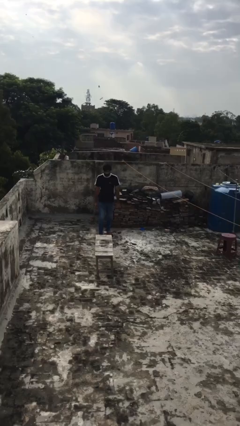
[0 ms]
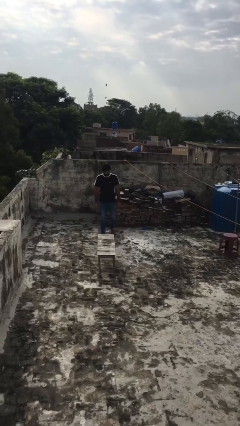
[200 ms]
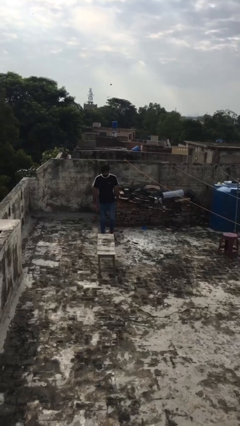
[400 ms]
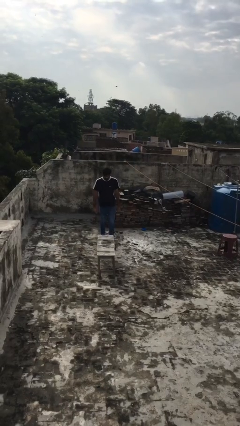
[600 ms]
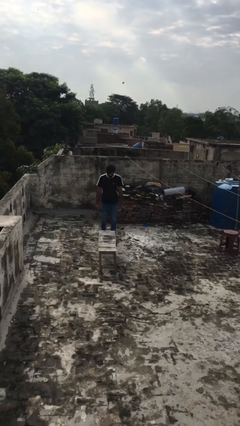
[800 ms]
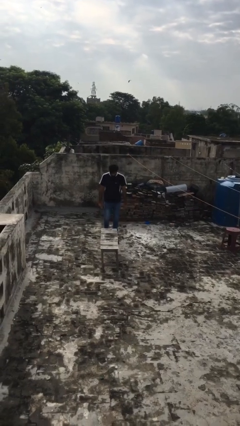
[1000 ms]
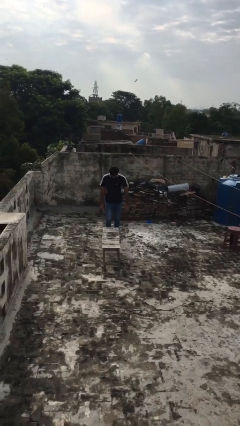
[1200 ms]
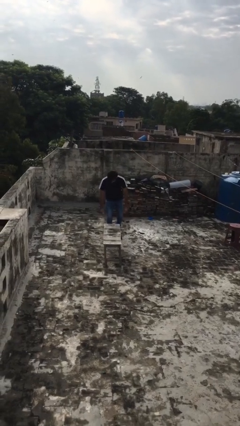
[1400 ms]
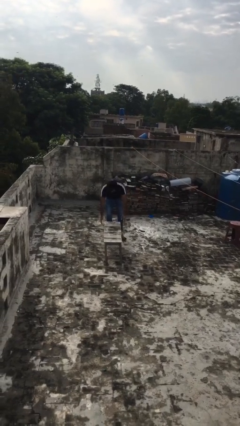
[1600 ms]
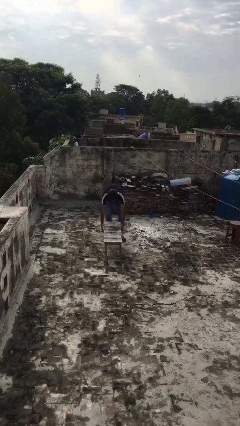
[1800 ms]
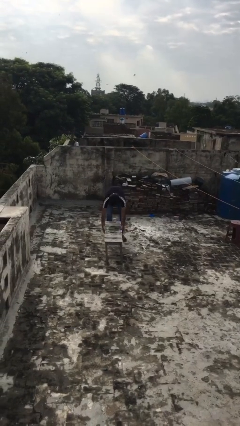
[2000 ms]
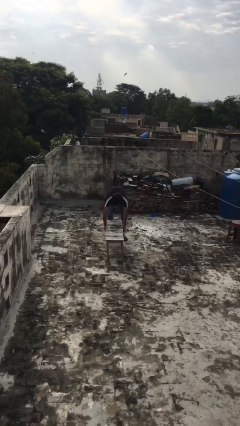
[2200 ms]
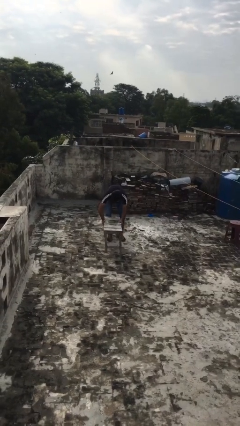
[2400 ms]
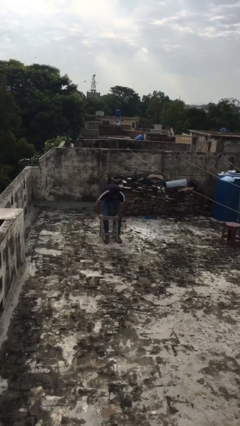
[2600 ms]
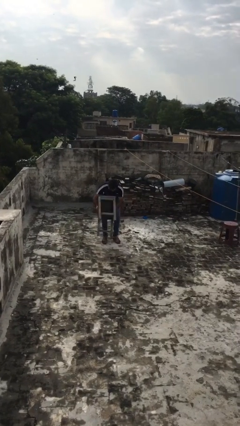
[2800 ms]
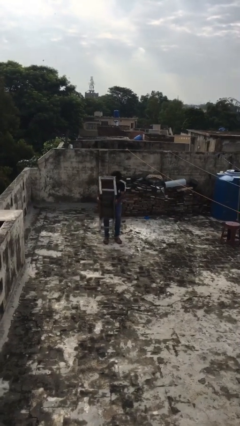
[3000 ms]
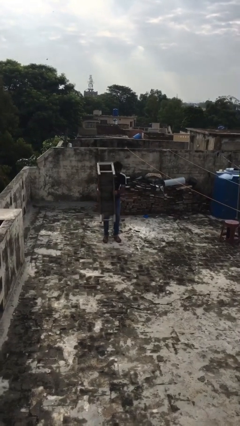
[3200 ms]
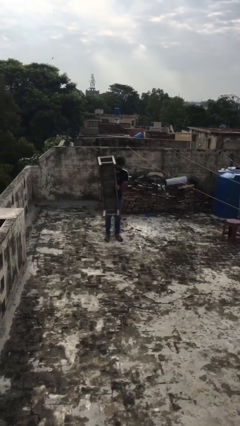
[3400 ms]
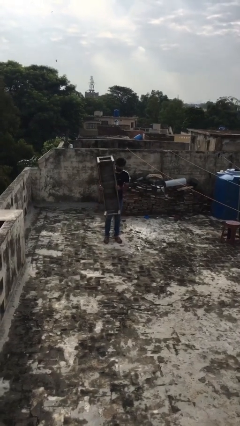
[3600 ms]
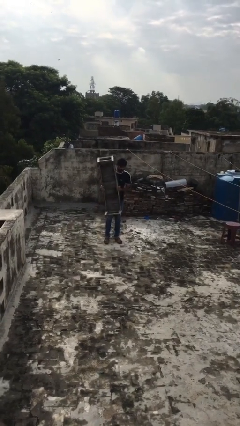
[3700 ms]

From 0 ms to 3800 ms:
person picks up object from floor

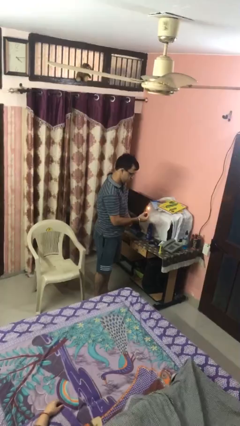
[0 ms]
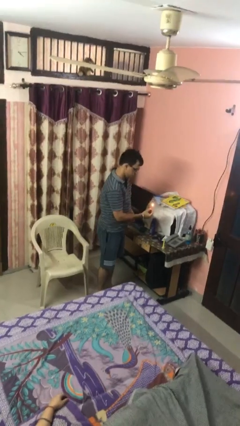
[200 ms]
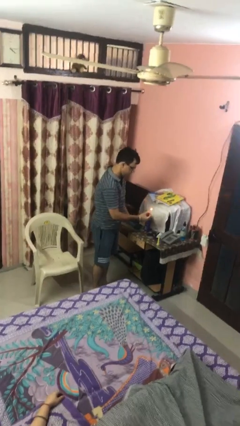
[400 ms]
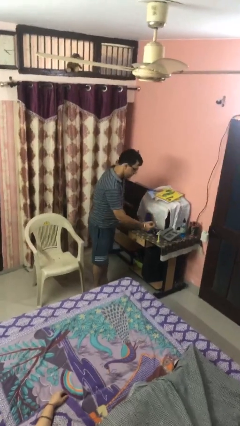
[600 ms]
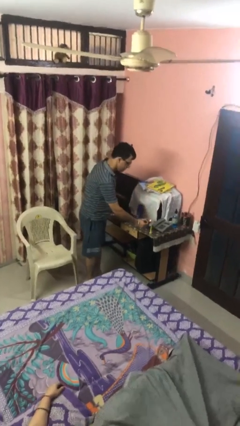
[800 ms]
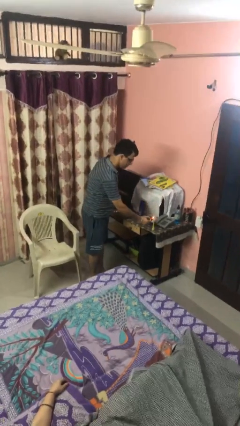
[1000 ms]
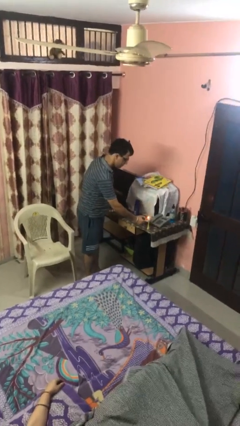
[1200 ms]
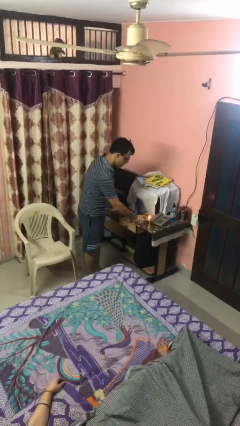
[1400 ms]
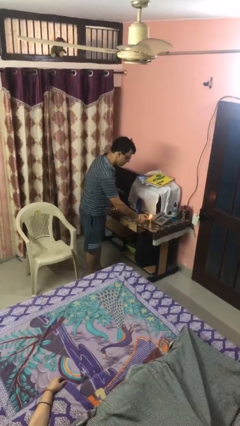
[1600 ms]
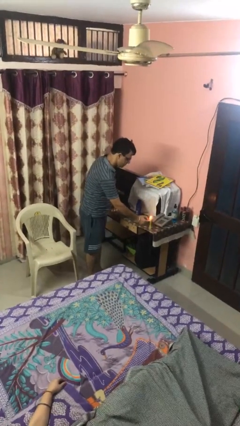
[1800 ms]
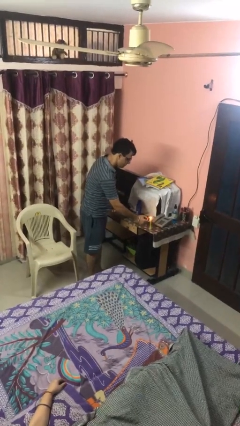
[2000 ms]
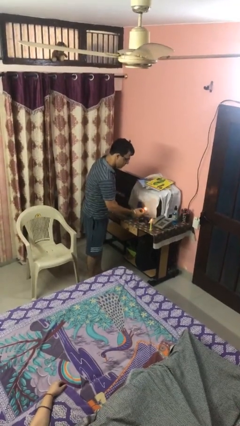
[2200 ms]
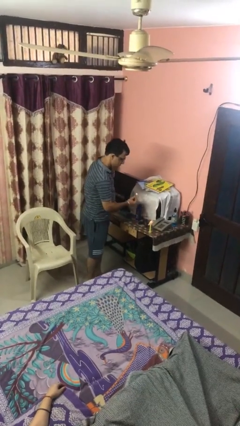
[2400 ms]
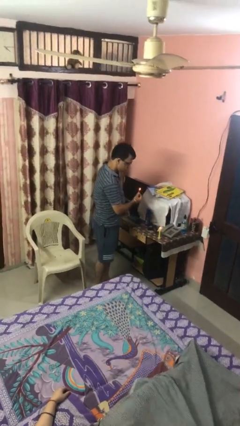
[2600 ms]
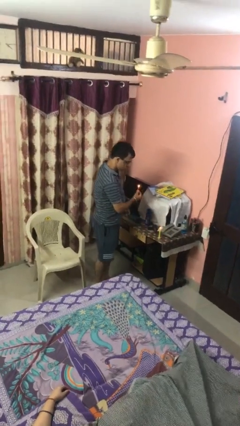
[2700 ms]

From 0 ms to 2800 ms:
person lights candle

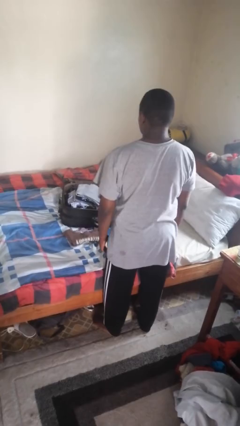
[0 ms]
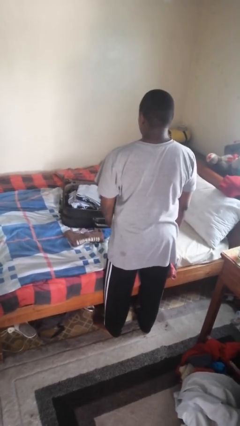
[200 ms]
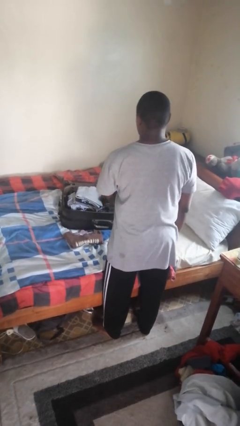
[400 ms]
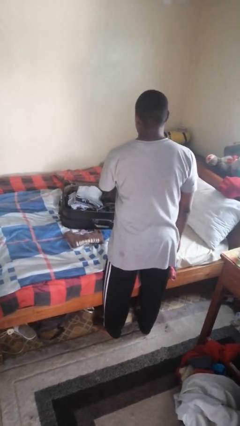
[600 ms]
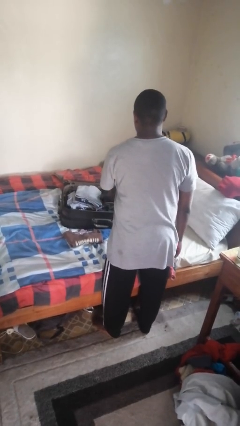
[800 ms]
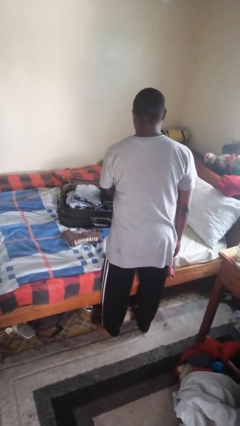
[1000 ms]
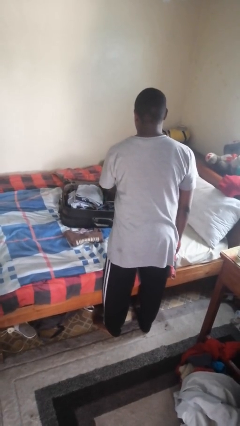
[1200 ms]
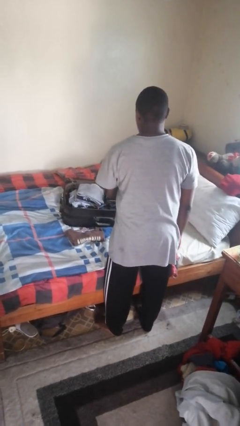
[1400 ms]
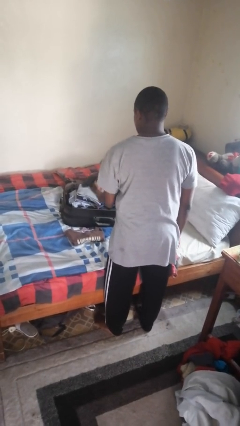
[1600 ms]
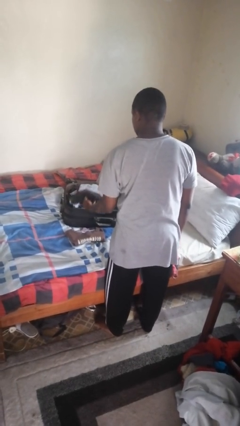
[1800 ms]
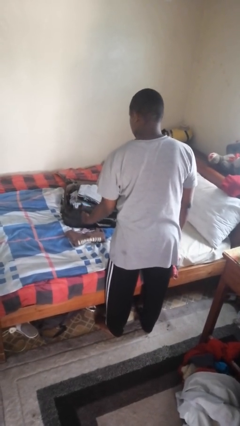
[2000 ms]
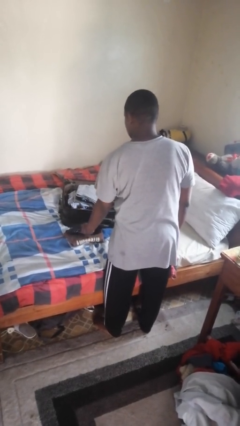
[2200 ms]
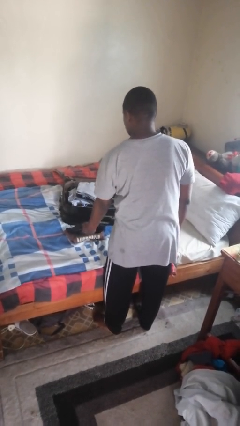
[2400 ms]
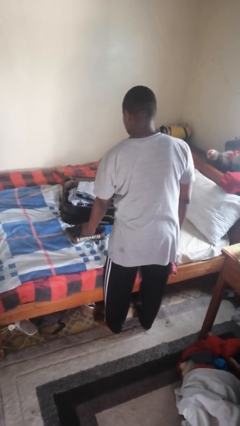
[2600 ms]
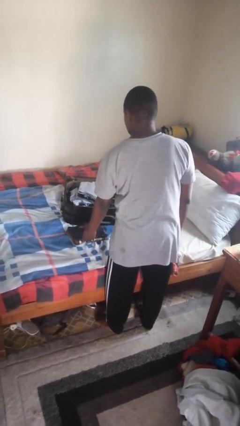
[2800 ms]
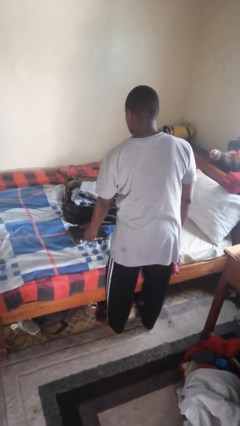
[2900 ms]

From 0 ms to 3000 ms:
person unloads clothes from suitcase

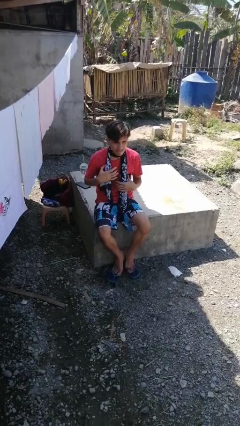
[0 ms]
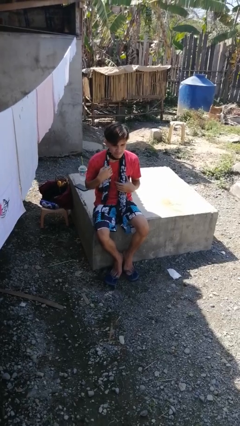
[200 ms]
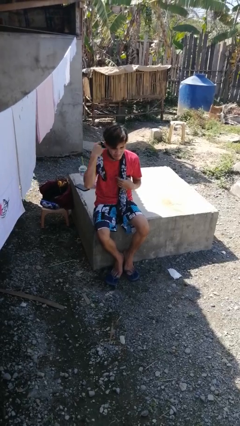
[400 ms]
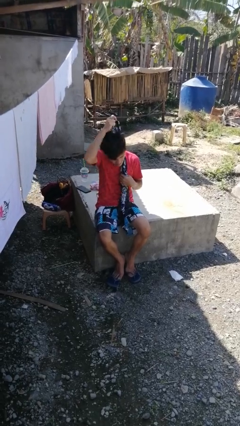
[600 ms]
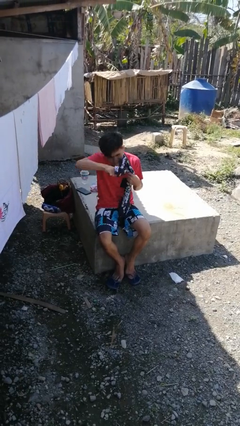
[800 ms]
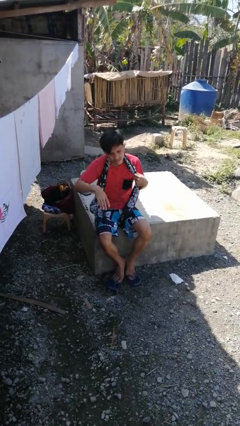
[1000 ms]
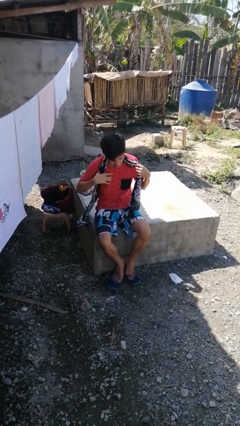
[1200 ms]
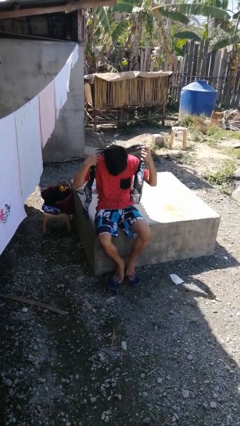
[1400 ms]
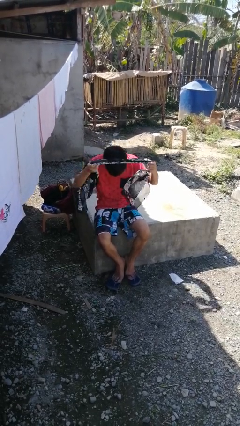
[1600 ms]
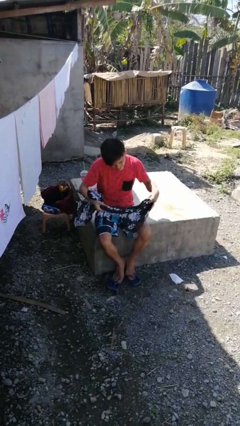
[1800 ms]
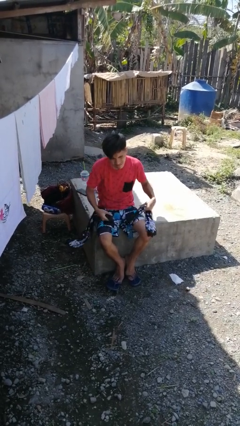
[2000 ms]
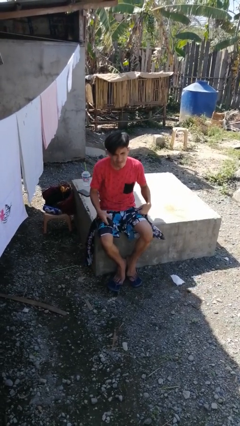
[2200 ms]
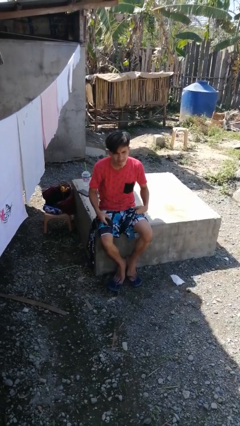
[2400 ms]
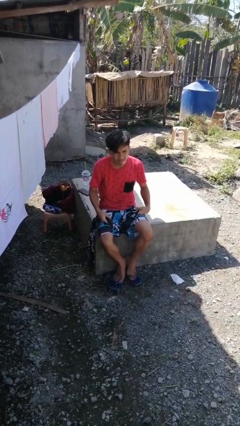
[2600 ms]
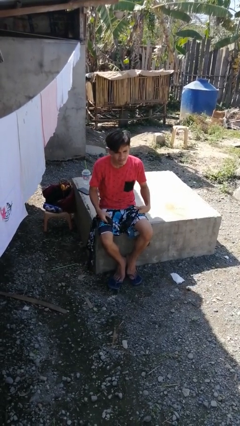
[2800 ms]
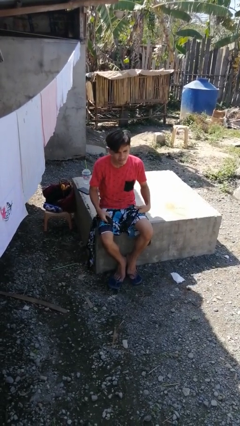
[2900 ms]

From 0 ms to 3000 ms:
person takes off scarf

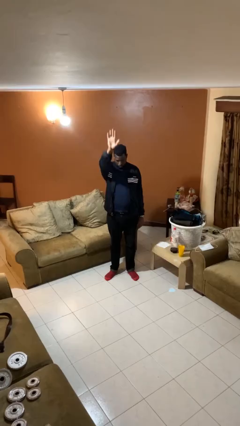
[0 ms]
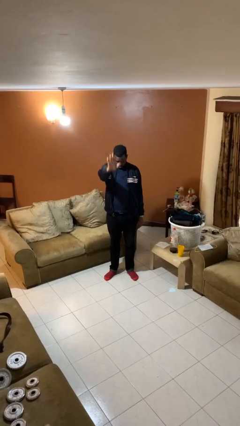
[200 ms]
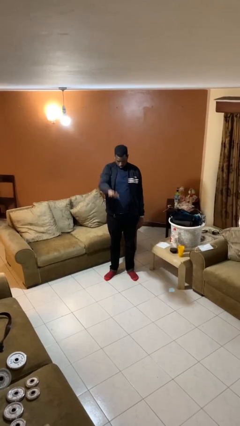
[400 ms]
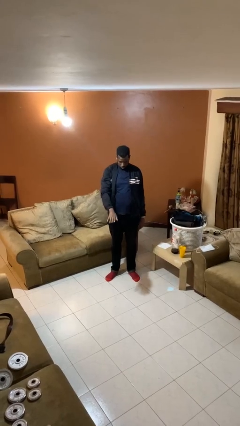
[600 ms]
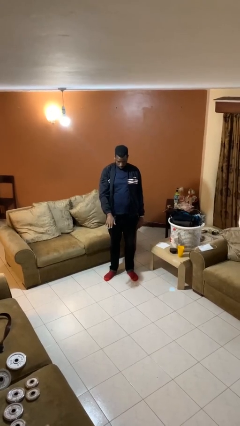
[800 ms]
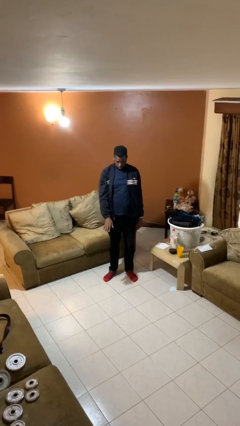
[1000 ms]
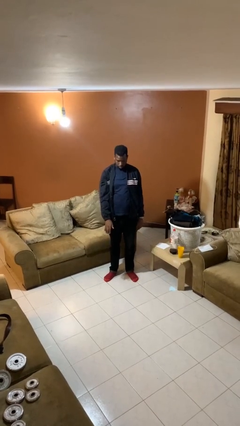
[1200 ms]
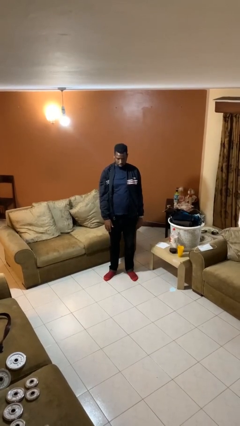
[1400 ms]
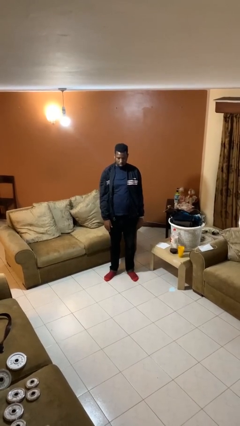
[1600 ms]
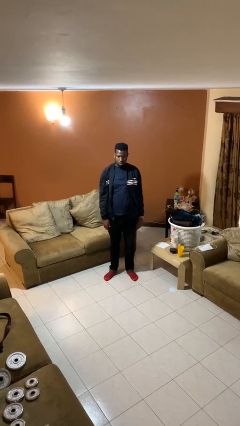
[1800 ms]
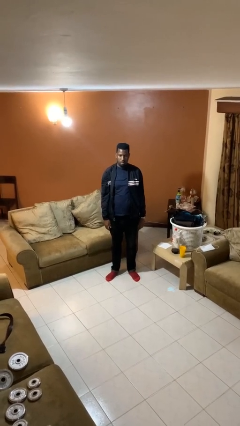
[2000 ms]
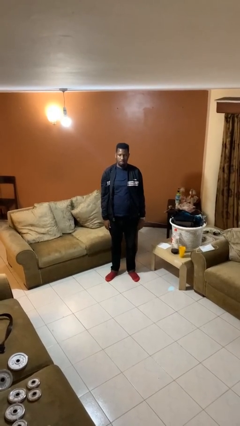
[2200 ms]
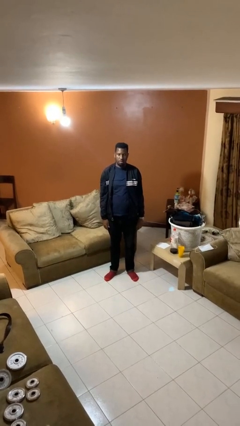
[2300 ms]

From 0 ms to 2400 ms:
person gestures swipe down

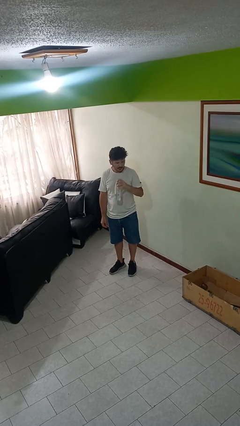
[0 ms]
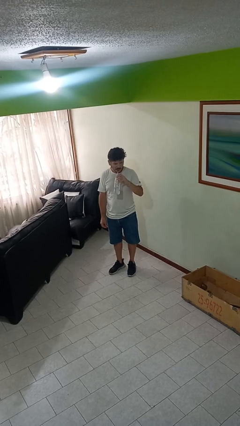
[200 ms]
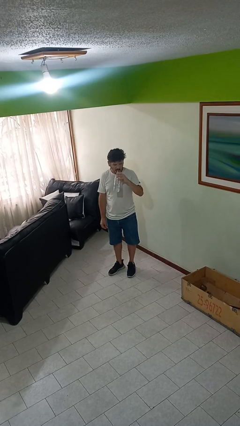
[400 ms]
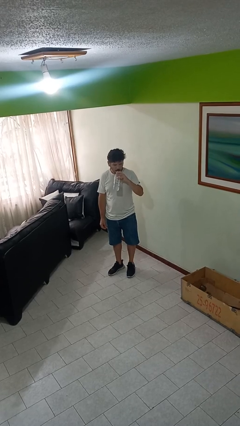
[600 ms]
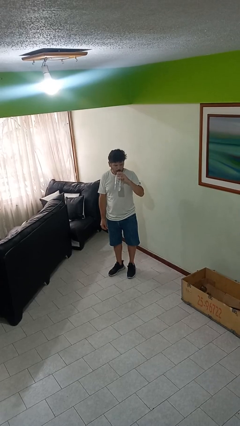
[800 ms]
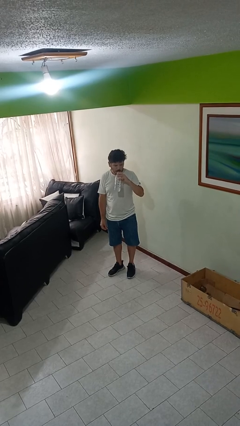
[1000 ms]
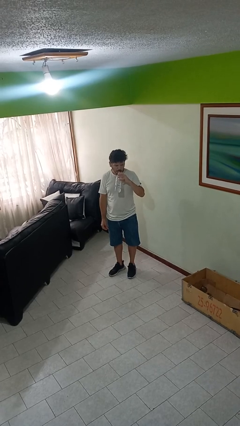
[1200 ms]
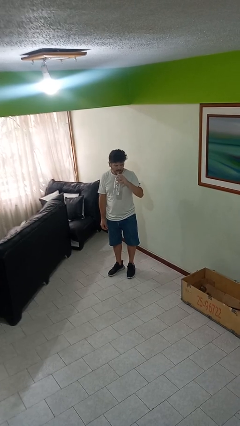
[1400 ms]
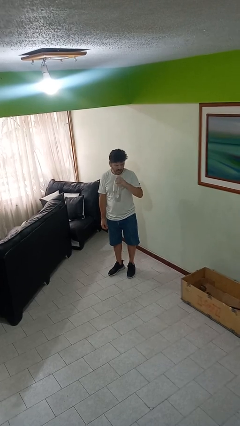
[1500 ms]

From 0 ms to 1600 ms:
person drinks from straw

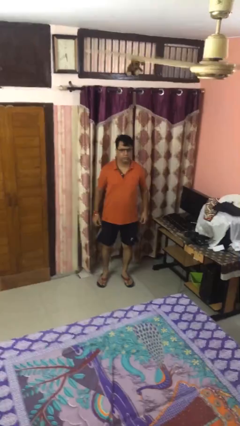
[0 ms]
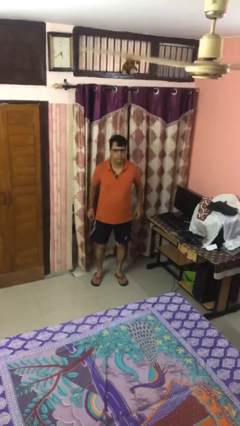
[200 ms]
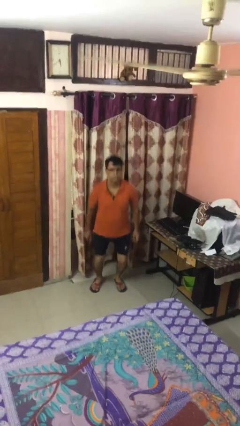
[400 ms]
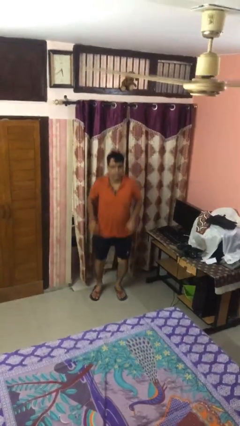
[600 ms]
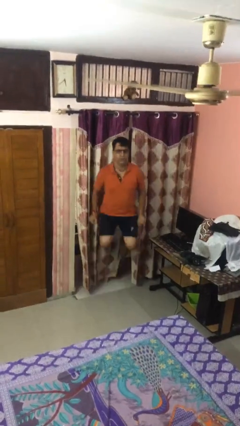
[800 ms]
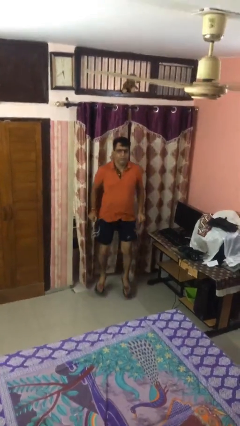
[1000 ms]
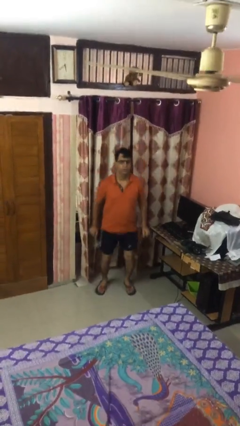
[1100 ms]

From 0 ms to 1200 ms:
person jumps
